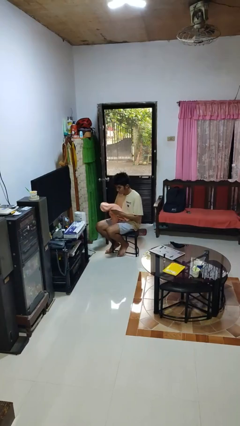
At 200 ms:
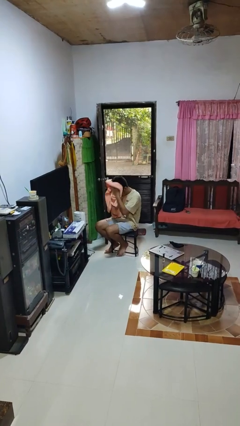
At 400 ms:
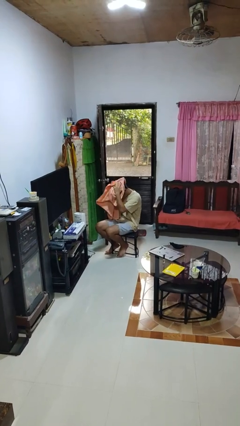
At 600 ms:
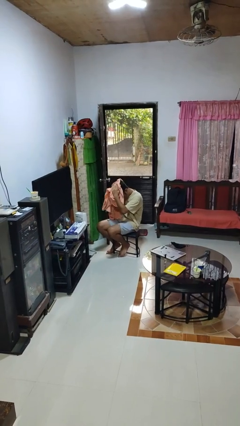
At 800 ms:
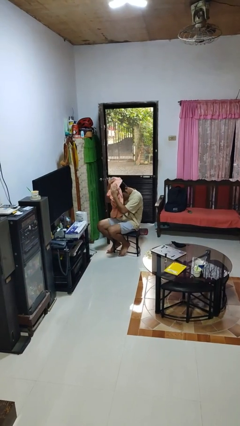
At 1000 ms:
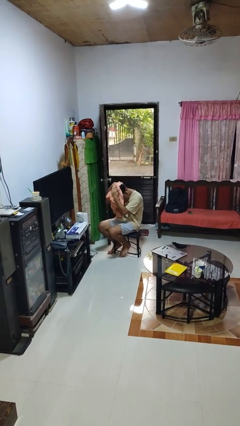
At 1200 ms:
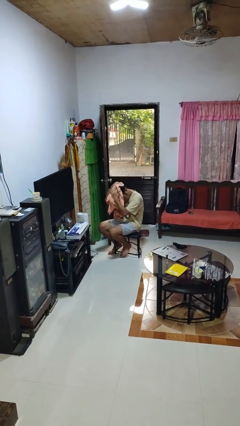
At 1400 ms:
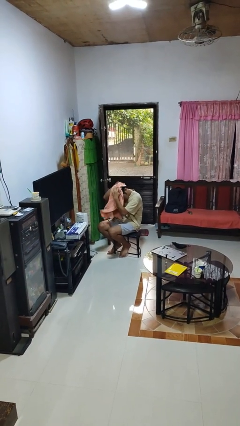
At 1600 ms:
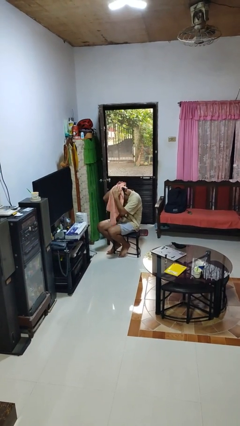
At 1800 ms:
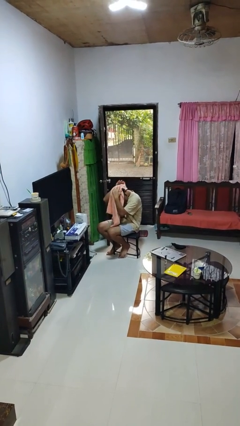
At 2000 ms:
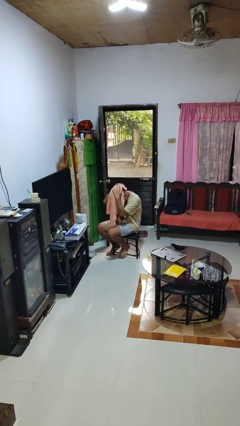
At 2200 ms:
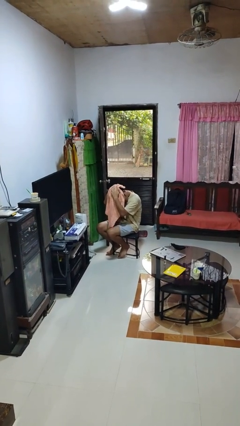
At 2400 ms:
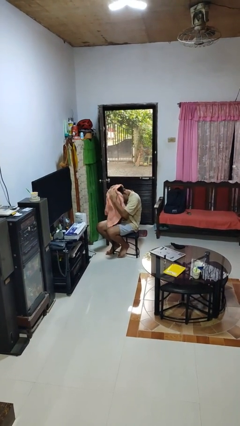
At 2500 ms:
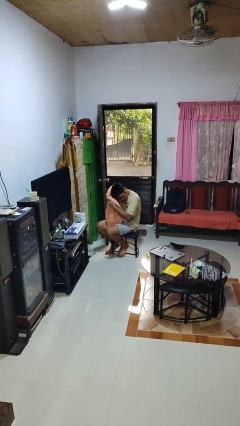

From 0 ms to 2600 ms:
person dries hair with towel

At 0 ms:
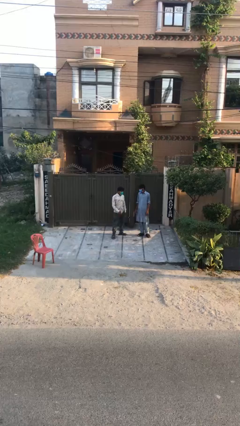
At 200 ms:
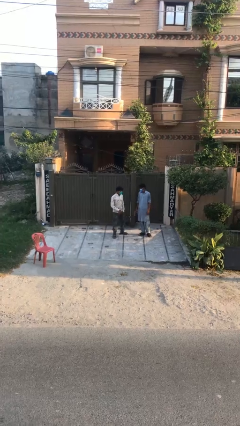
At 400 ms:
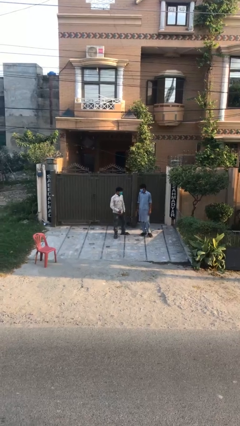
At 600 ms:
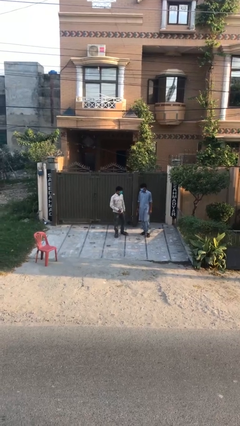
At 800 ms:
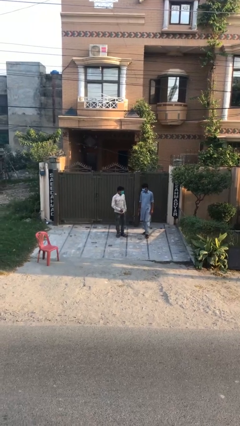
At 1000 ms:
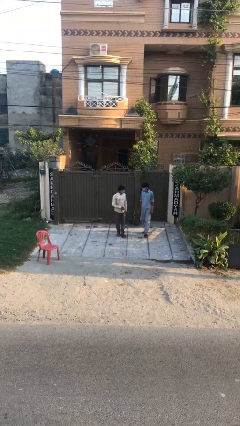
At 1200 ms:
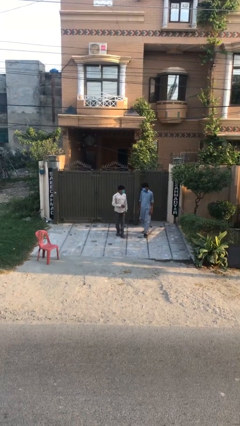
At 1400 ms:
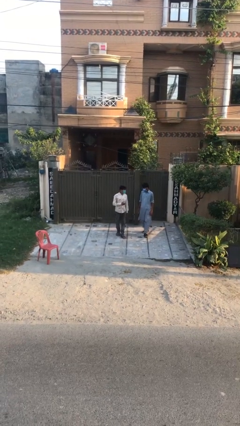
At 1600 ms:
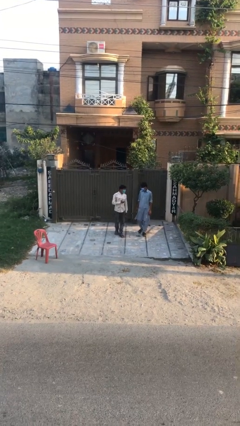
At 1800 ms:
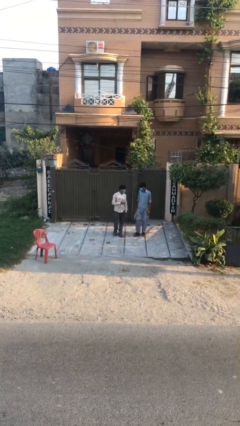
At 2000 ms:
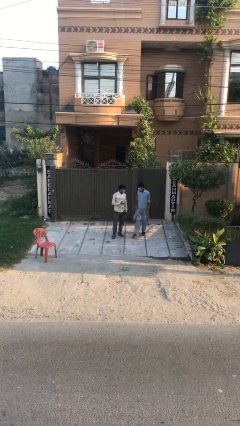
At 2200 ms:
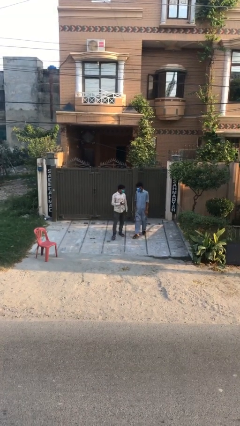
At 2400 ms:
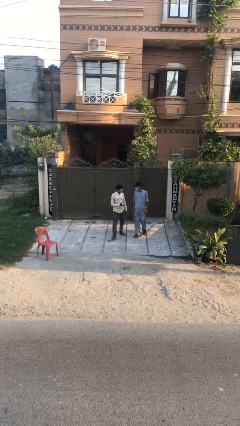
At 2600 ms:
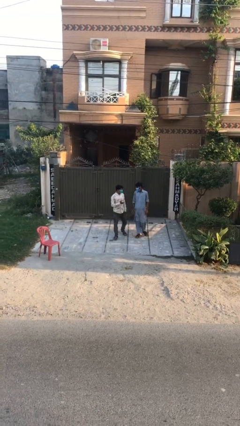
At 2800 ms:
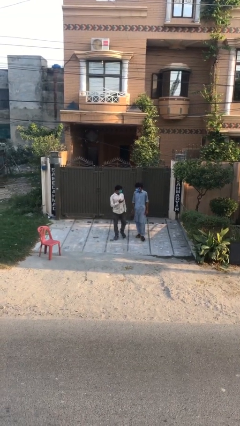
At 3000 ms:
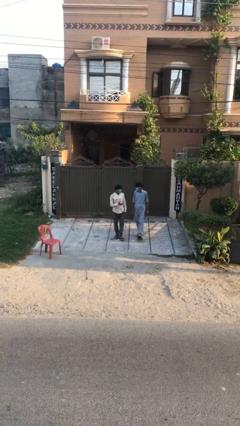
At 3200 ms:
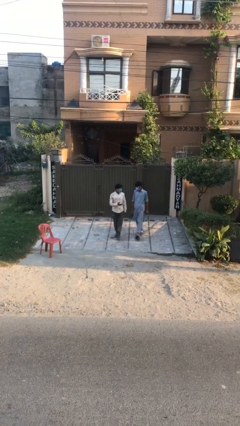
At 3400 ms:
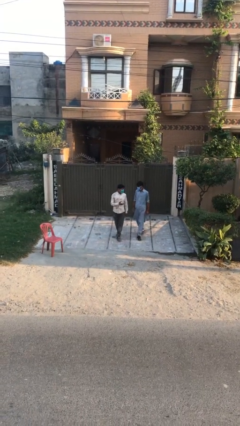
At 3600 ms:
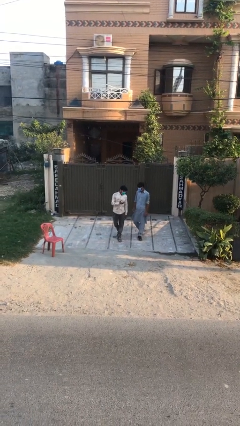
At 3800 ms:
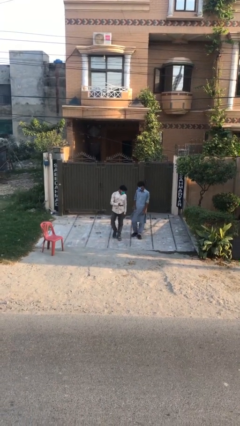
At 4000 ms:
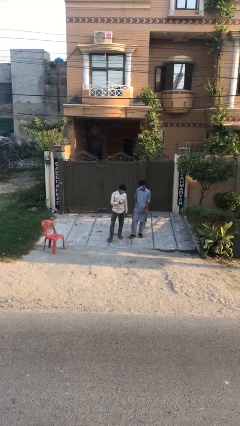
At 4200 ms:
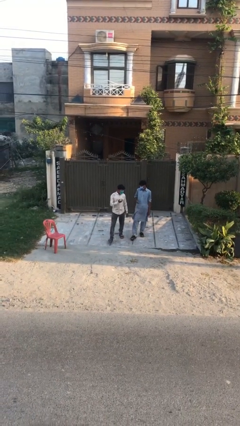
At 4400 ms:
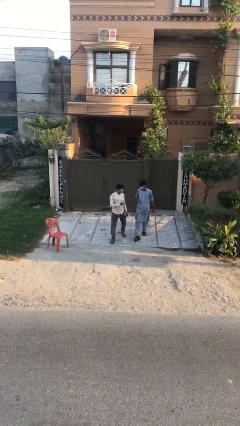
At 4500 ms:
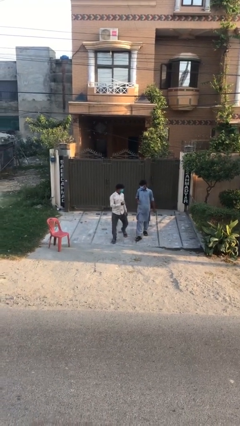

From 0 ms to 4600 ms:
person talks to person

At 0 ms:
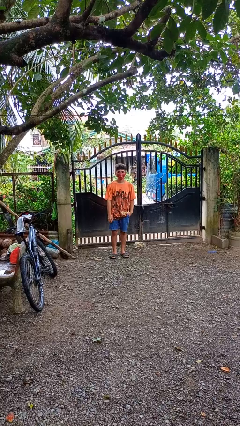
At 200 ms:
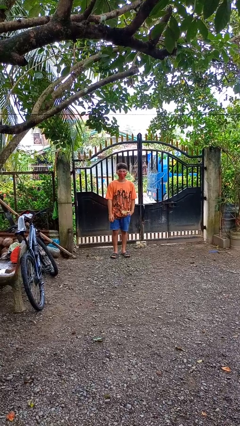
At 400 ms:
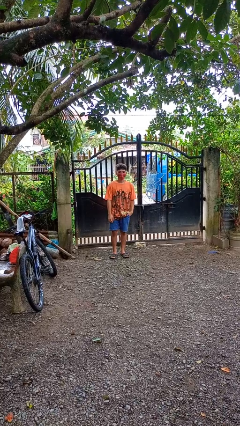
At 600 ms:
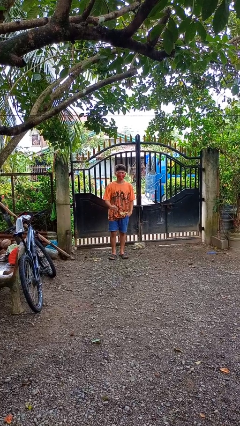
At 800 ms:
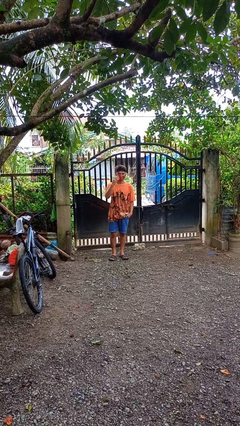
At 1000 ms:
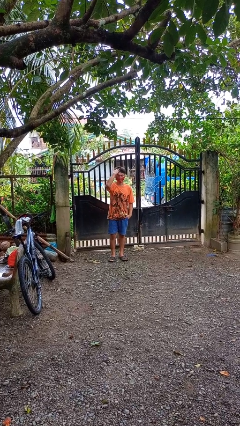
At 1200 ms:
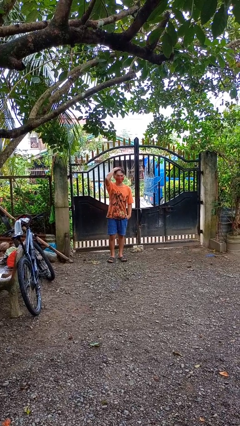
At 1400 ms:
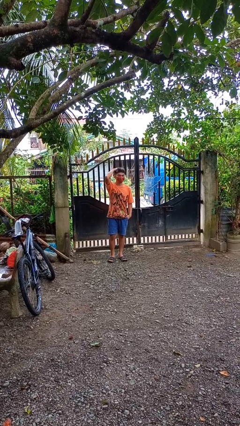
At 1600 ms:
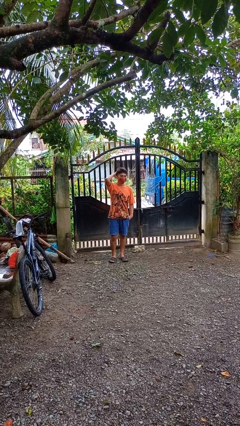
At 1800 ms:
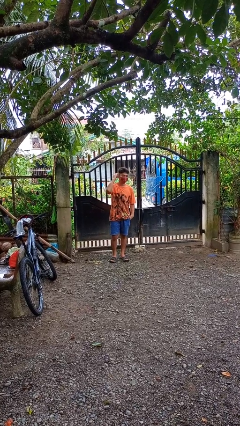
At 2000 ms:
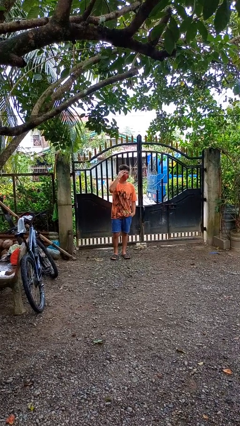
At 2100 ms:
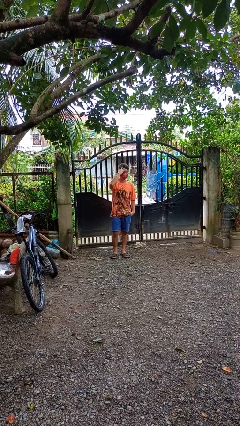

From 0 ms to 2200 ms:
person strokes hair

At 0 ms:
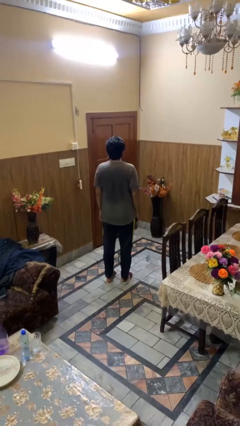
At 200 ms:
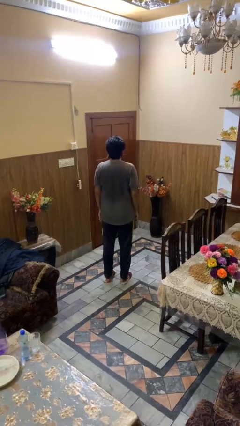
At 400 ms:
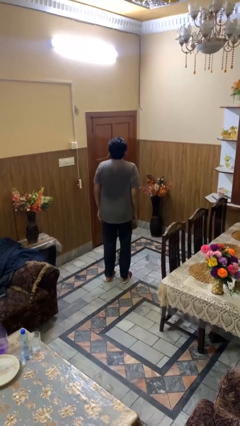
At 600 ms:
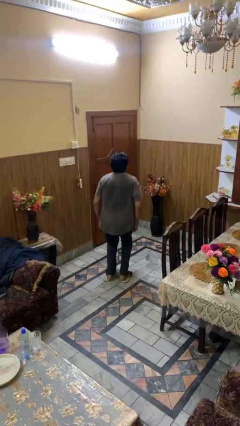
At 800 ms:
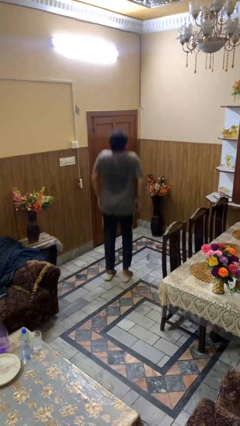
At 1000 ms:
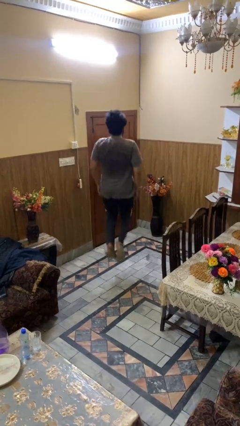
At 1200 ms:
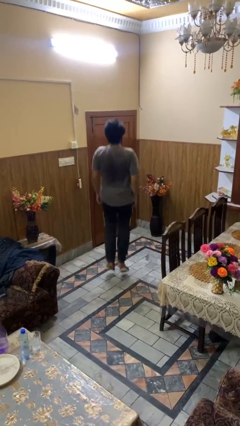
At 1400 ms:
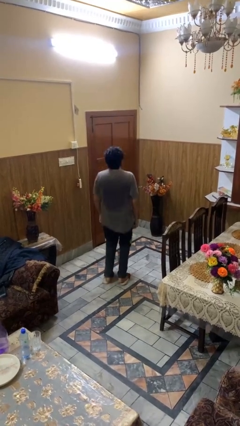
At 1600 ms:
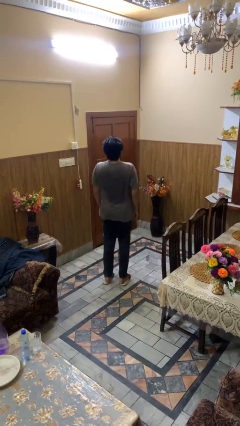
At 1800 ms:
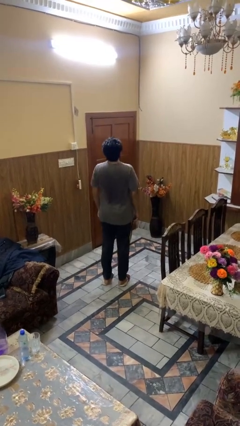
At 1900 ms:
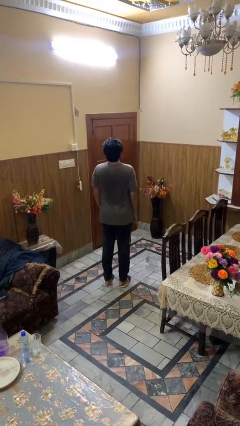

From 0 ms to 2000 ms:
person jumps

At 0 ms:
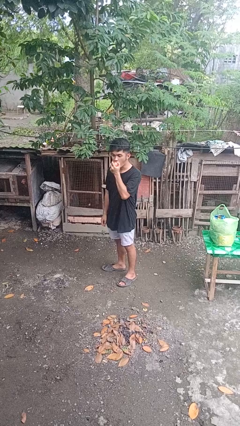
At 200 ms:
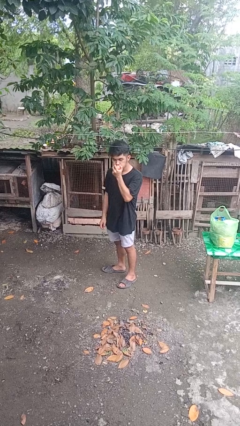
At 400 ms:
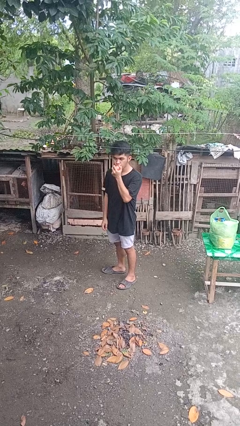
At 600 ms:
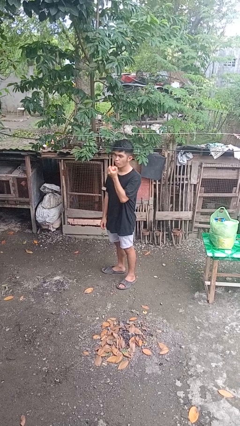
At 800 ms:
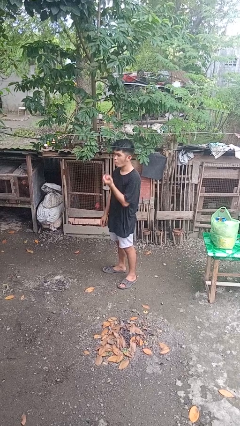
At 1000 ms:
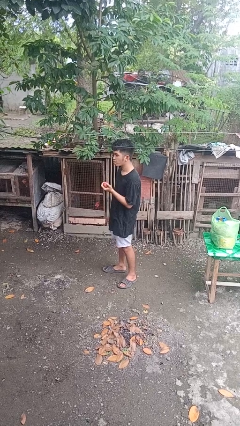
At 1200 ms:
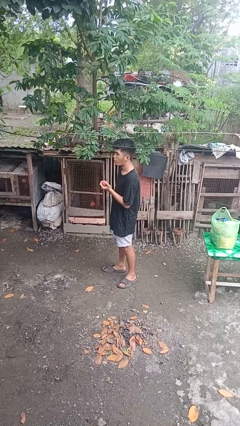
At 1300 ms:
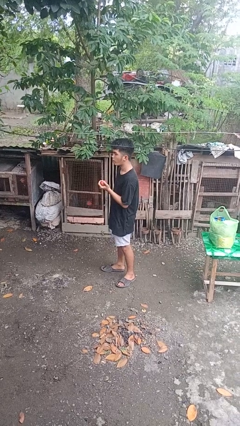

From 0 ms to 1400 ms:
person eats apple

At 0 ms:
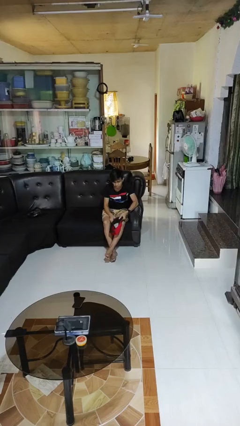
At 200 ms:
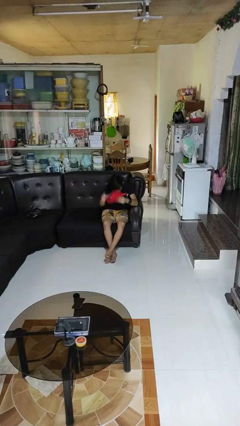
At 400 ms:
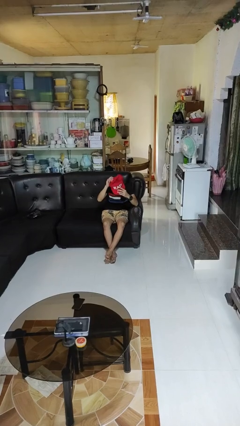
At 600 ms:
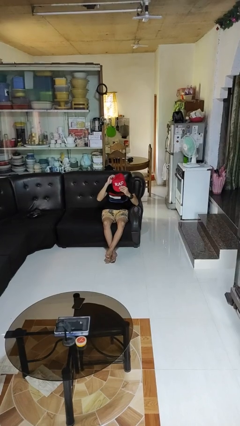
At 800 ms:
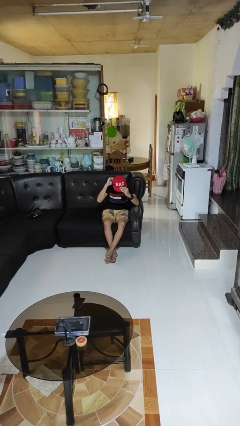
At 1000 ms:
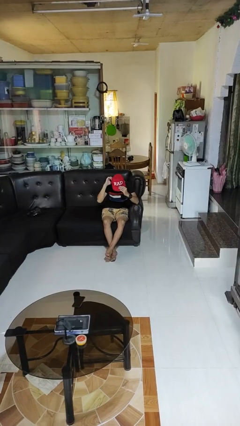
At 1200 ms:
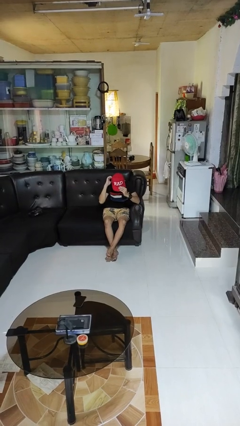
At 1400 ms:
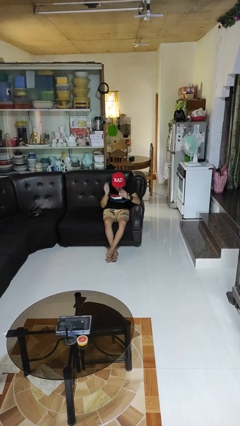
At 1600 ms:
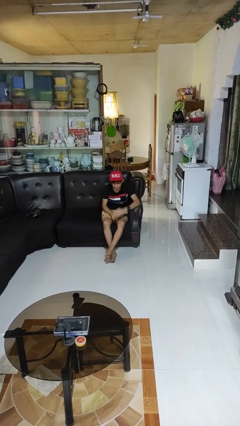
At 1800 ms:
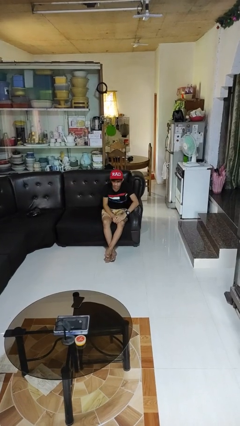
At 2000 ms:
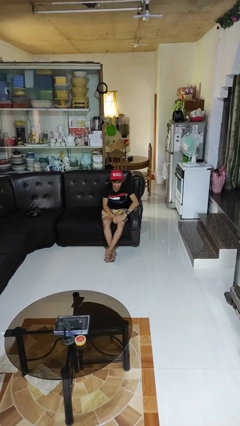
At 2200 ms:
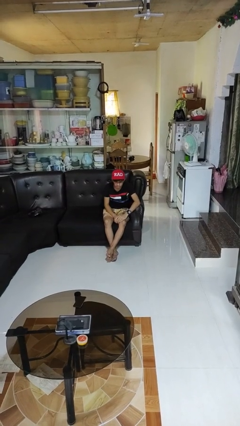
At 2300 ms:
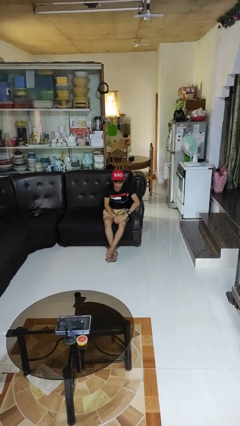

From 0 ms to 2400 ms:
person puts on hat

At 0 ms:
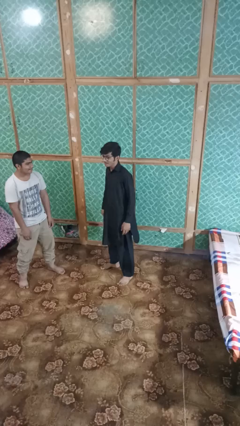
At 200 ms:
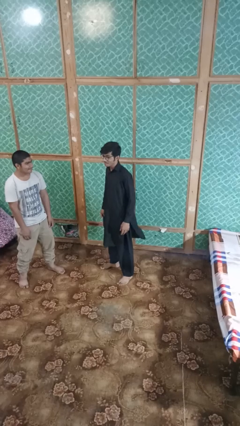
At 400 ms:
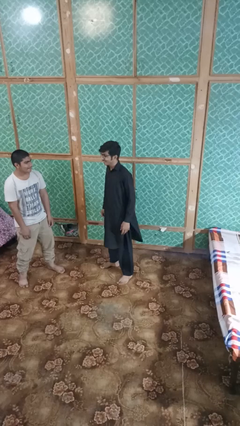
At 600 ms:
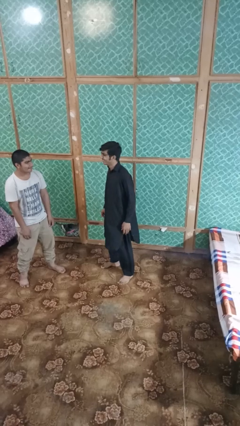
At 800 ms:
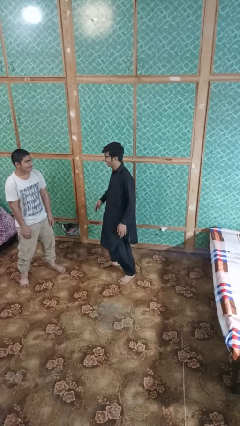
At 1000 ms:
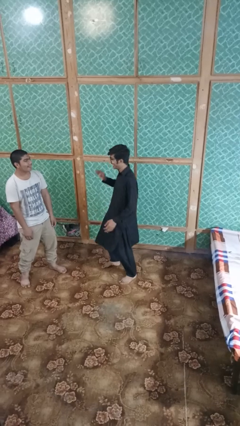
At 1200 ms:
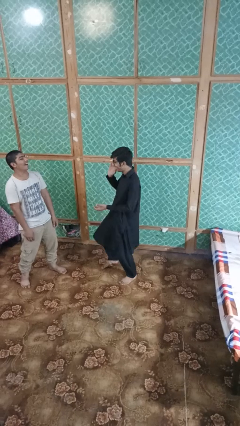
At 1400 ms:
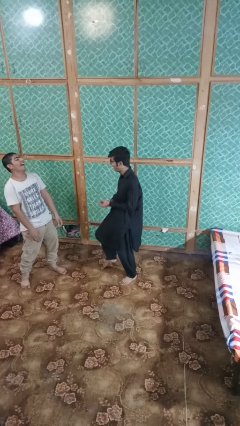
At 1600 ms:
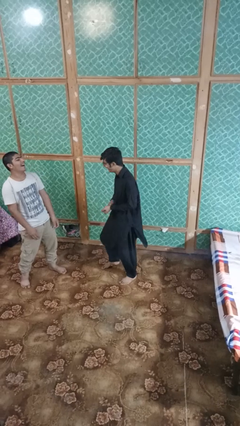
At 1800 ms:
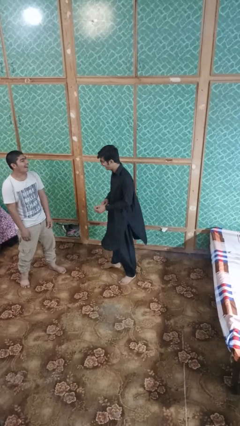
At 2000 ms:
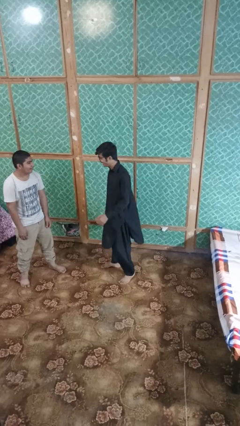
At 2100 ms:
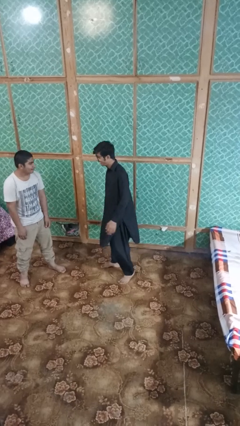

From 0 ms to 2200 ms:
person laughs with person
